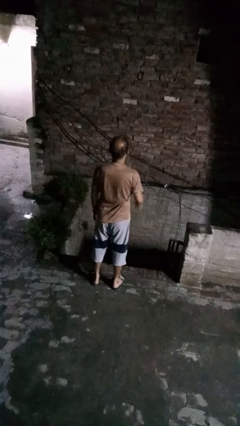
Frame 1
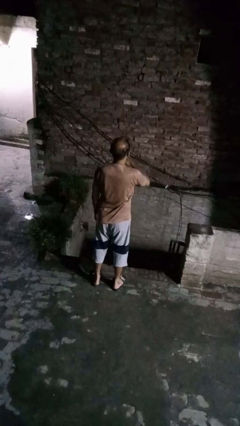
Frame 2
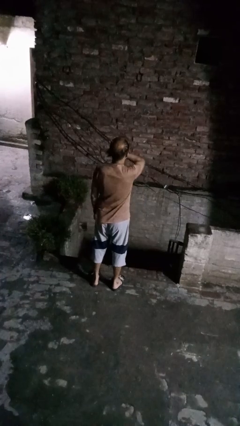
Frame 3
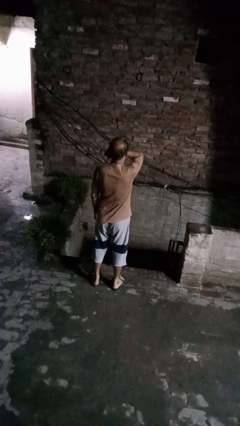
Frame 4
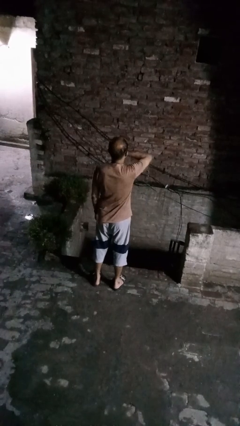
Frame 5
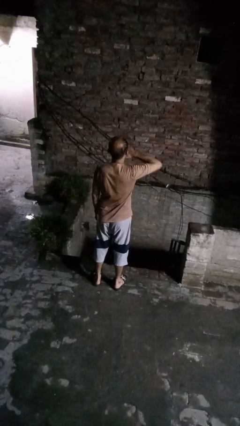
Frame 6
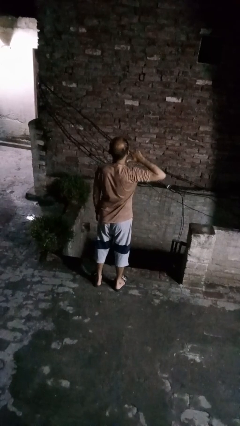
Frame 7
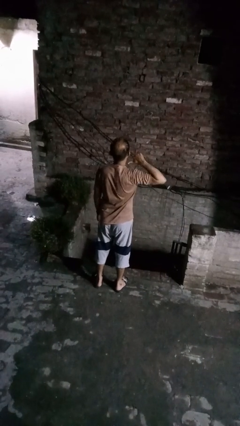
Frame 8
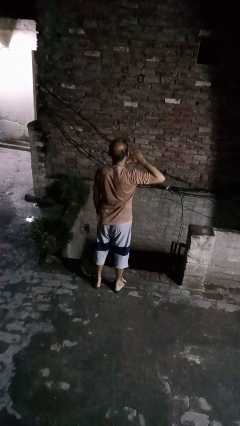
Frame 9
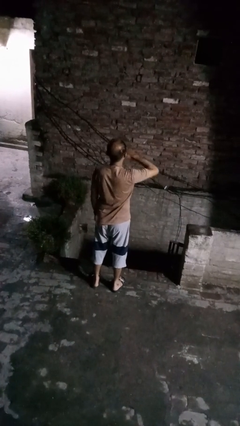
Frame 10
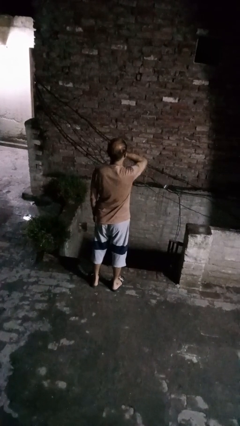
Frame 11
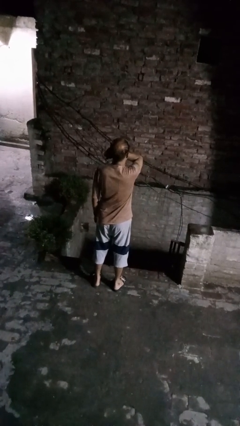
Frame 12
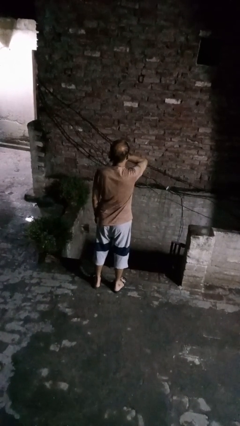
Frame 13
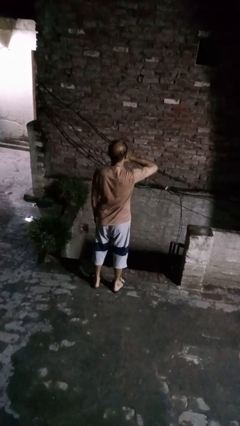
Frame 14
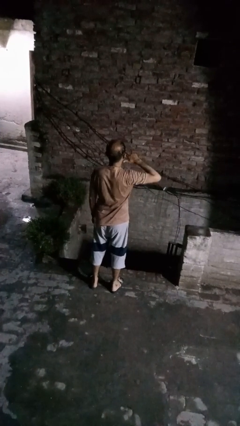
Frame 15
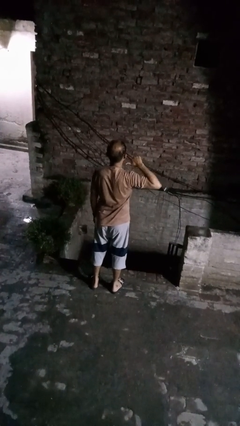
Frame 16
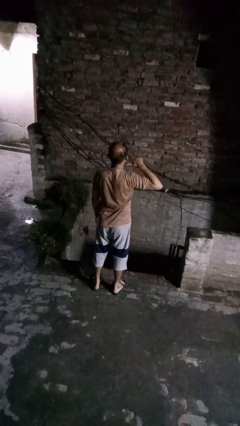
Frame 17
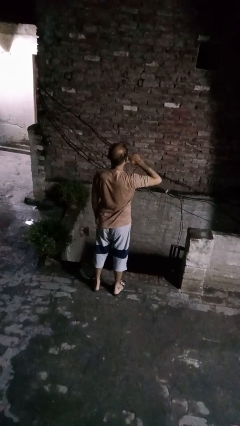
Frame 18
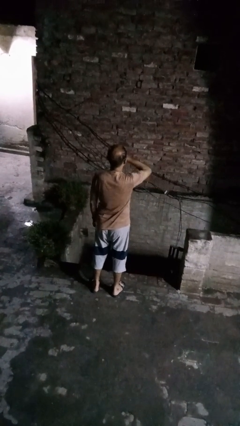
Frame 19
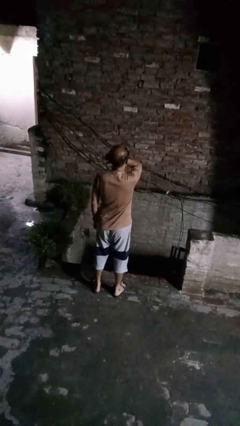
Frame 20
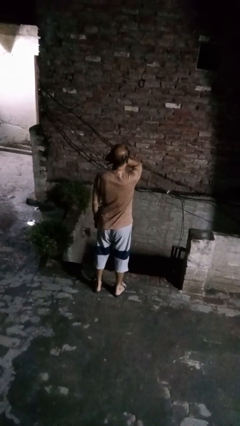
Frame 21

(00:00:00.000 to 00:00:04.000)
person gestures cut

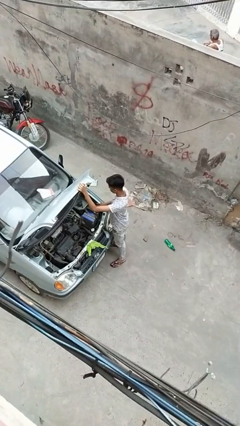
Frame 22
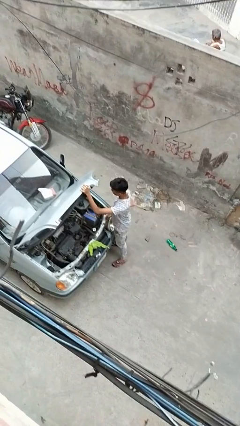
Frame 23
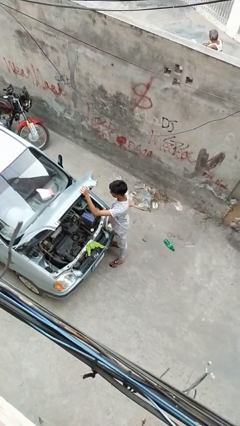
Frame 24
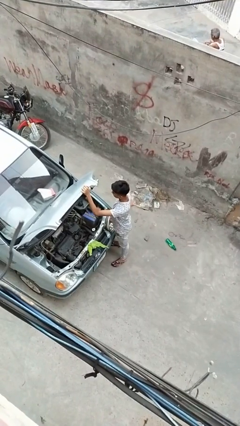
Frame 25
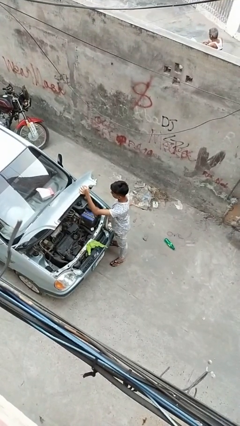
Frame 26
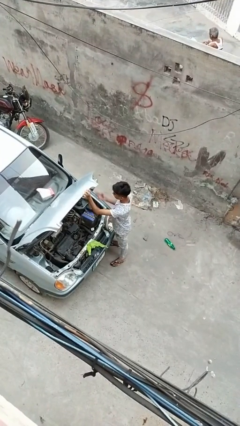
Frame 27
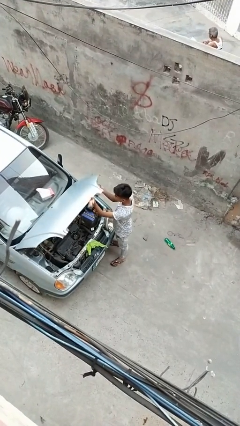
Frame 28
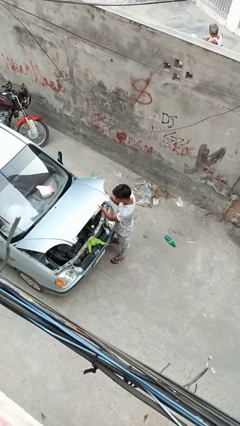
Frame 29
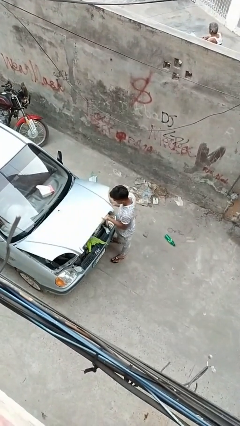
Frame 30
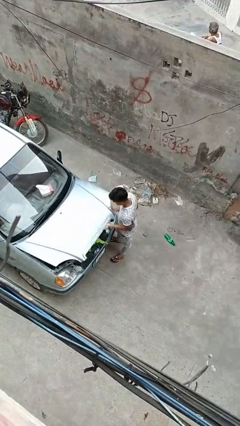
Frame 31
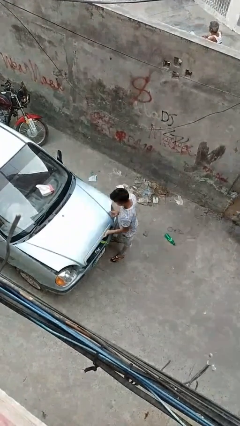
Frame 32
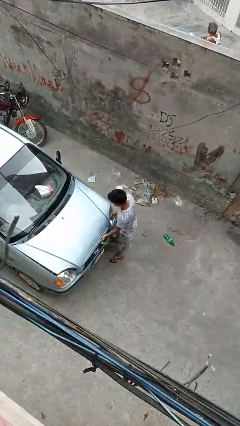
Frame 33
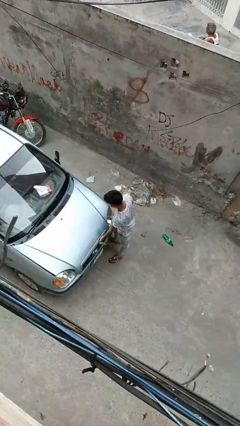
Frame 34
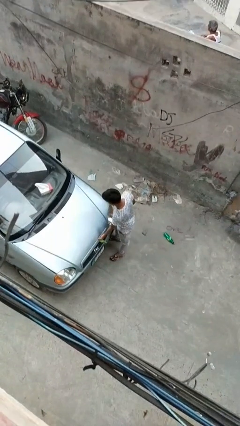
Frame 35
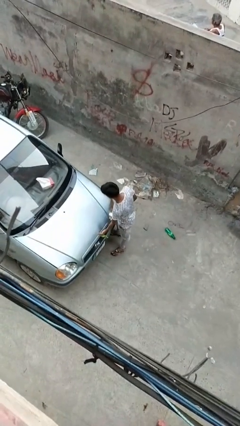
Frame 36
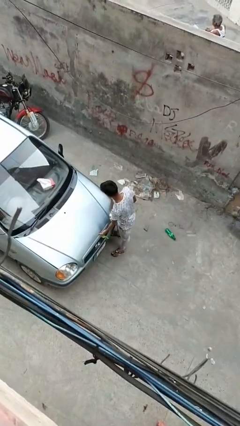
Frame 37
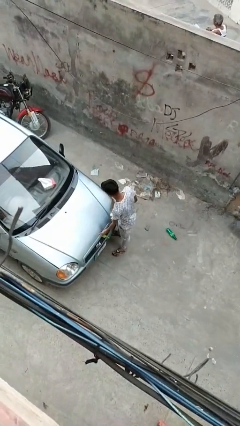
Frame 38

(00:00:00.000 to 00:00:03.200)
person closes car hood

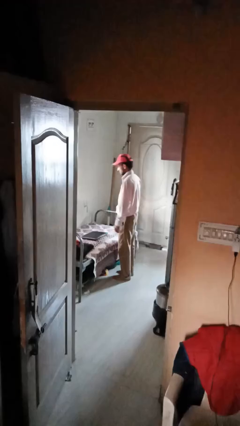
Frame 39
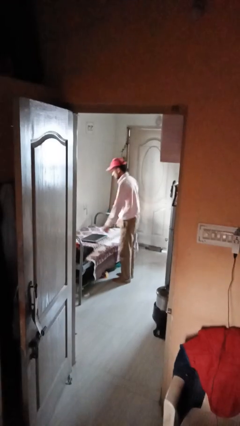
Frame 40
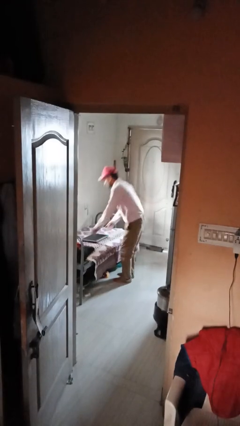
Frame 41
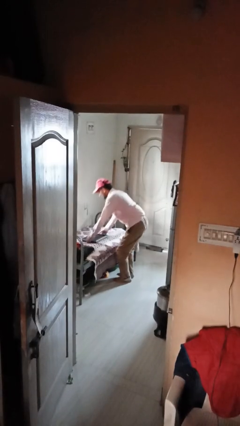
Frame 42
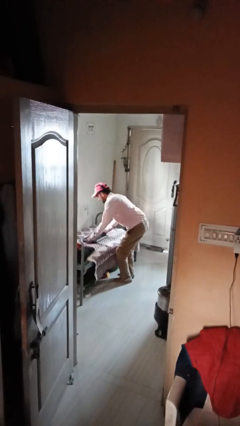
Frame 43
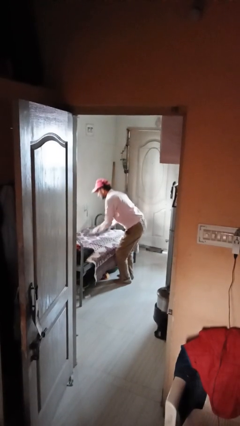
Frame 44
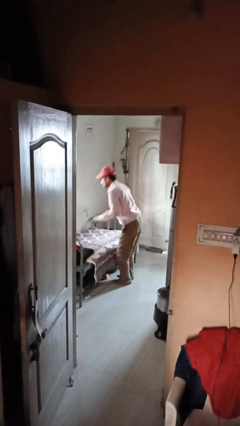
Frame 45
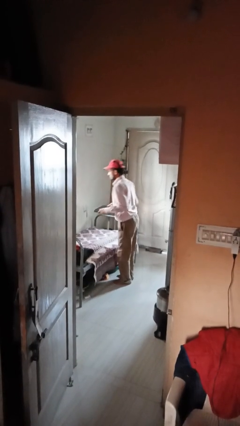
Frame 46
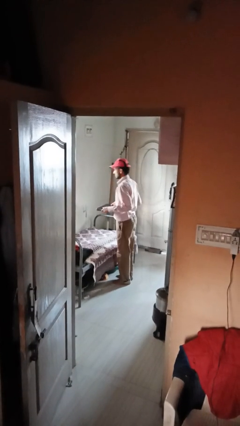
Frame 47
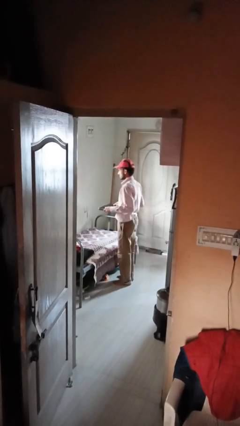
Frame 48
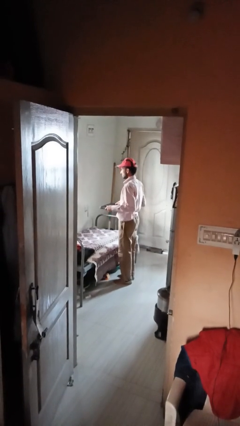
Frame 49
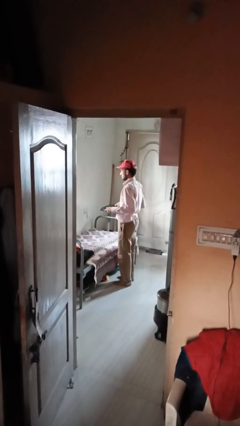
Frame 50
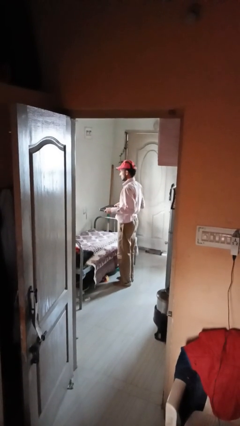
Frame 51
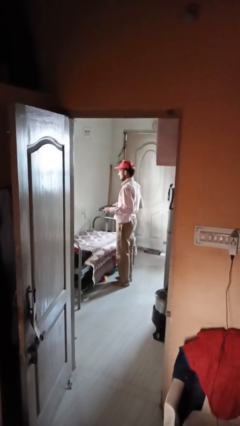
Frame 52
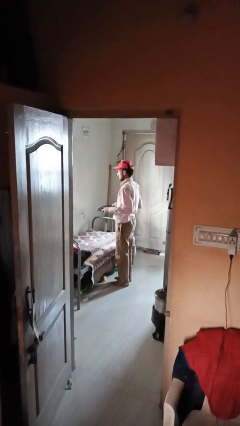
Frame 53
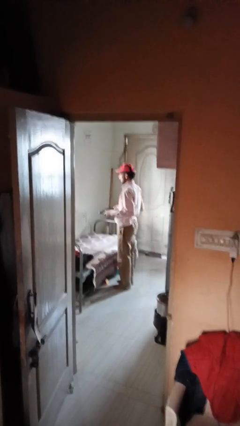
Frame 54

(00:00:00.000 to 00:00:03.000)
person picks up object from couch

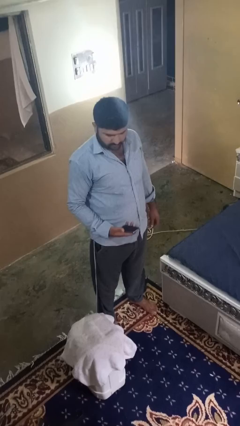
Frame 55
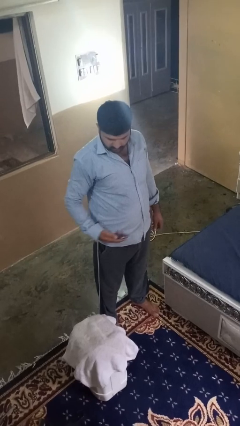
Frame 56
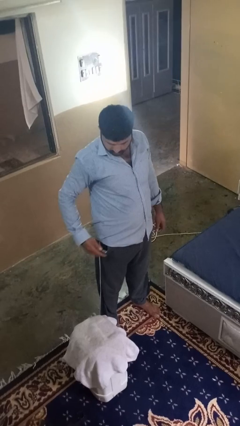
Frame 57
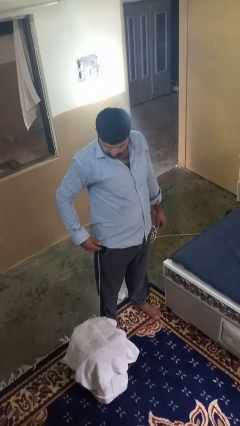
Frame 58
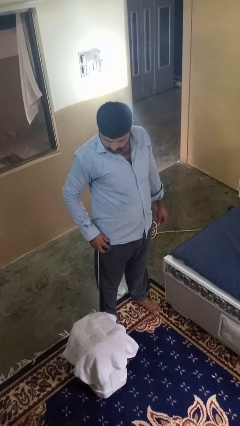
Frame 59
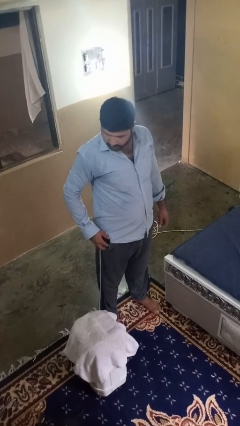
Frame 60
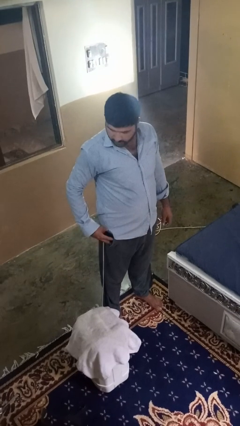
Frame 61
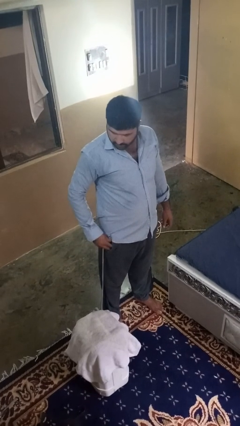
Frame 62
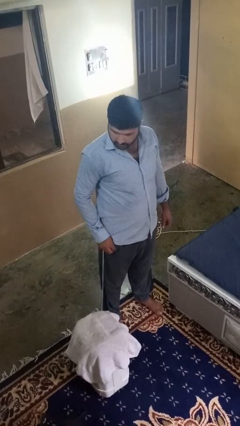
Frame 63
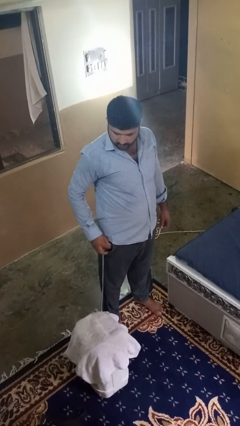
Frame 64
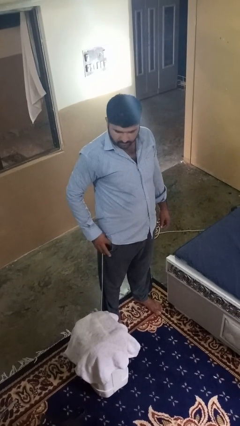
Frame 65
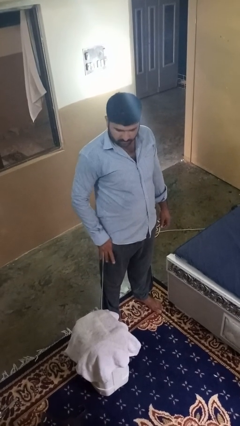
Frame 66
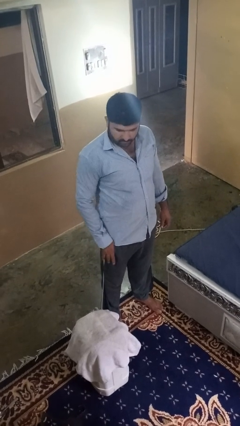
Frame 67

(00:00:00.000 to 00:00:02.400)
person puts phone into pocket

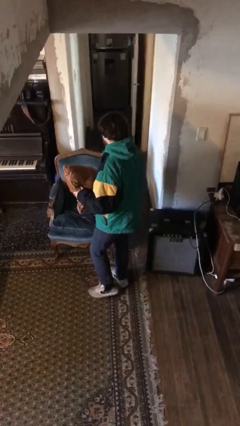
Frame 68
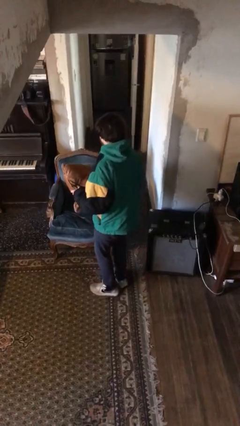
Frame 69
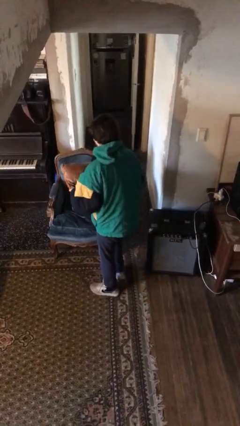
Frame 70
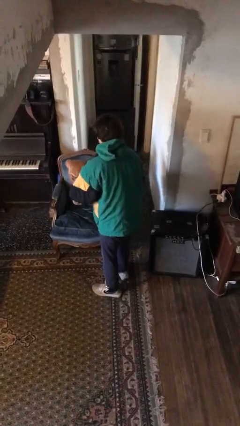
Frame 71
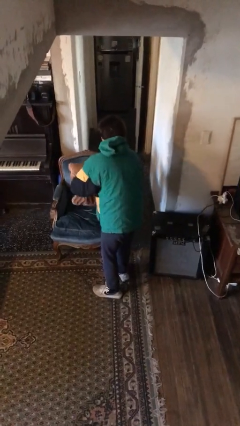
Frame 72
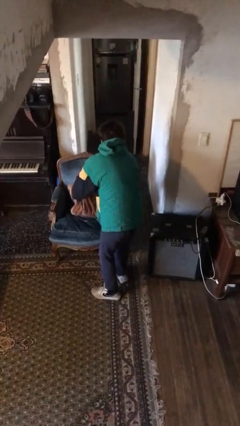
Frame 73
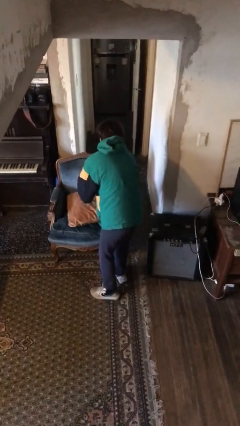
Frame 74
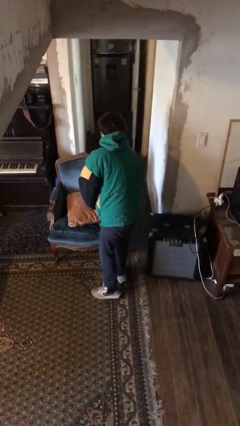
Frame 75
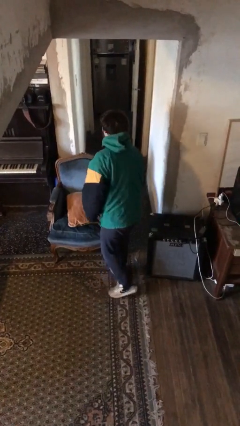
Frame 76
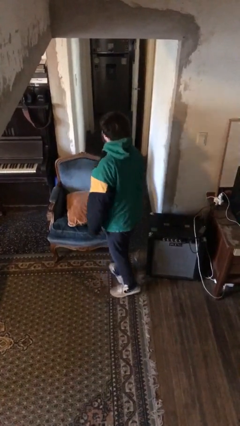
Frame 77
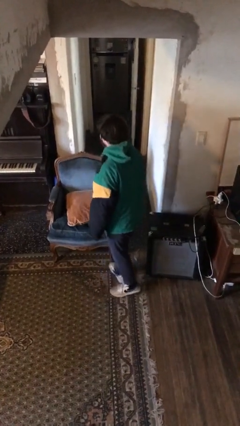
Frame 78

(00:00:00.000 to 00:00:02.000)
person puts down object on couch

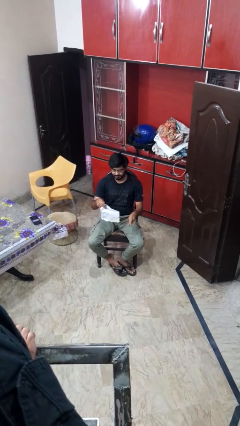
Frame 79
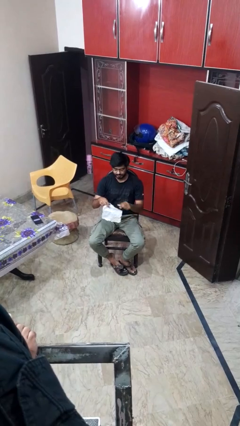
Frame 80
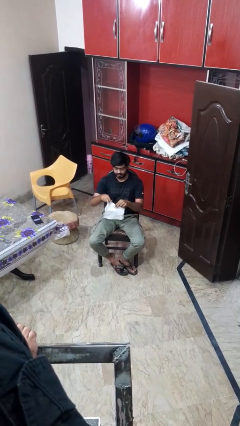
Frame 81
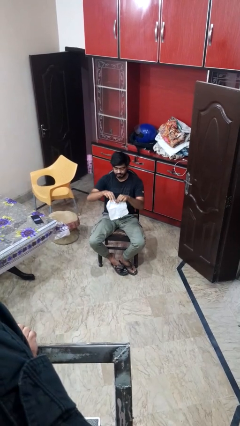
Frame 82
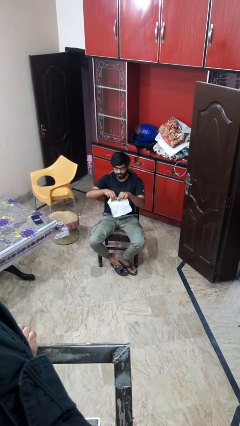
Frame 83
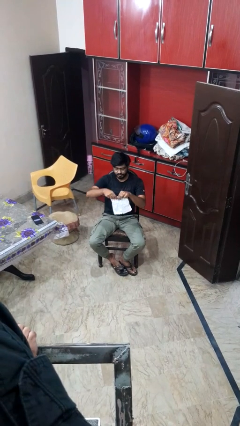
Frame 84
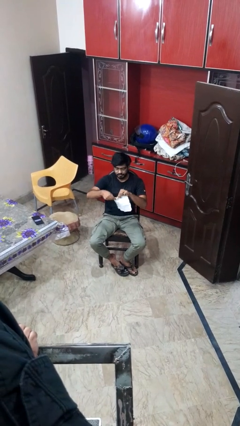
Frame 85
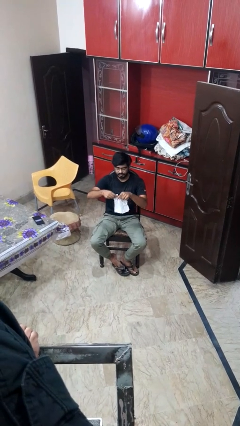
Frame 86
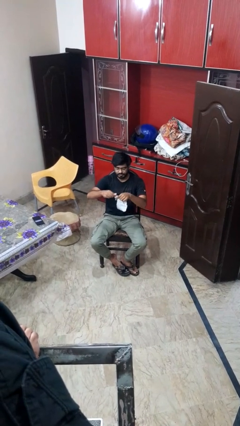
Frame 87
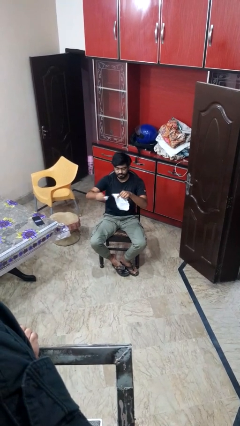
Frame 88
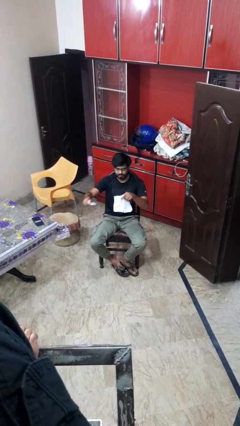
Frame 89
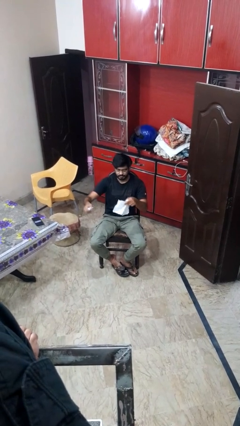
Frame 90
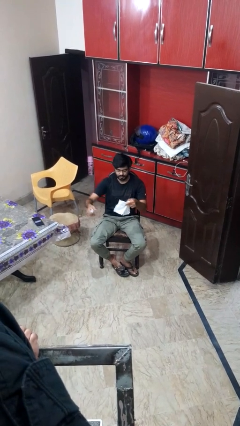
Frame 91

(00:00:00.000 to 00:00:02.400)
person tears paper
